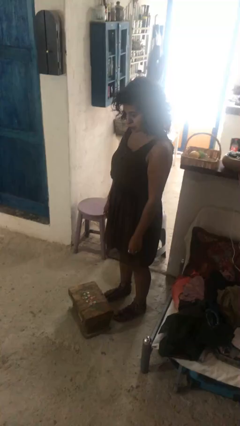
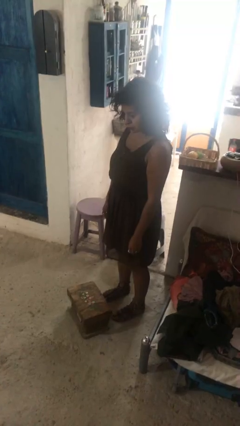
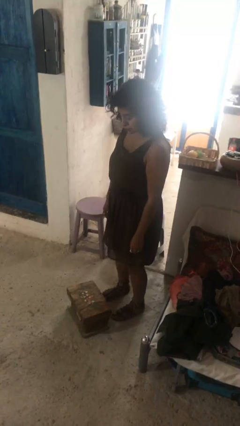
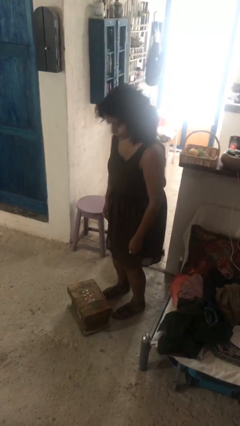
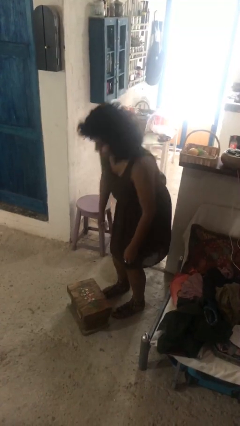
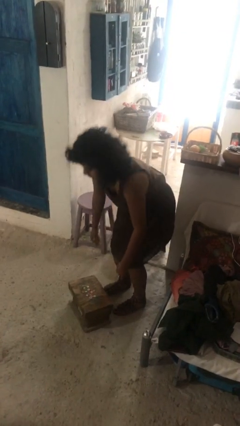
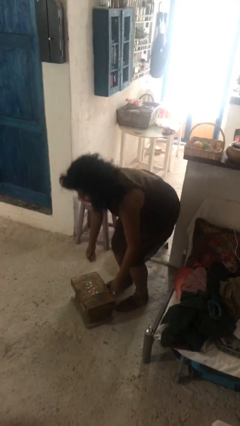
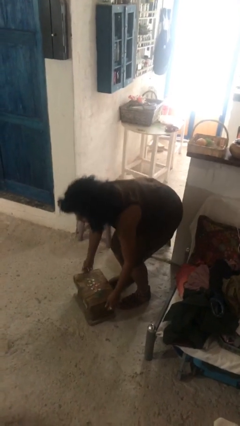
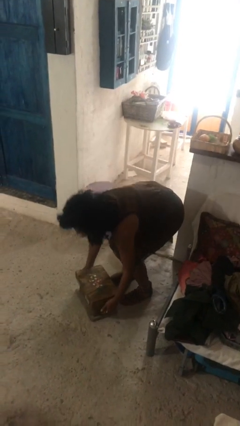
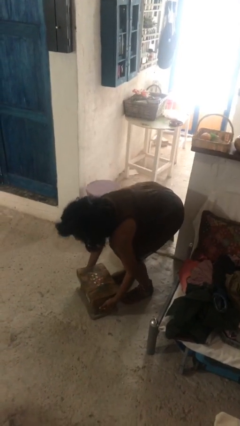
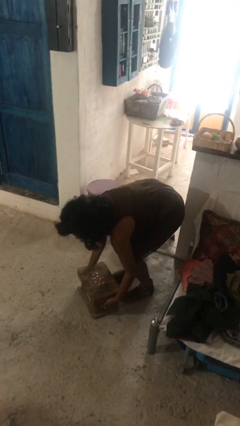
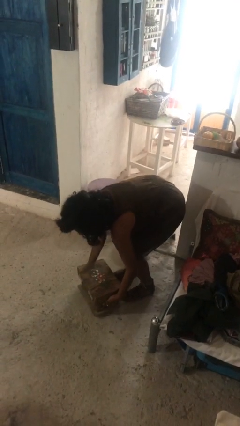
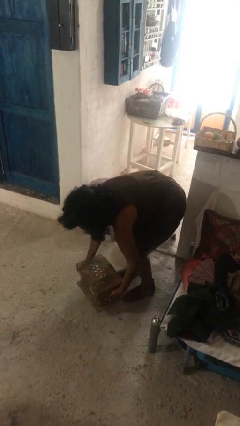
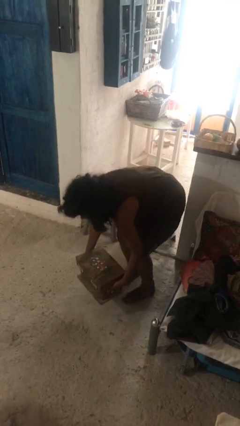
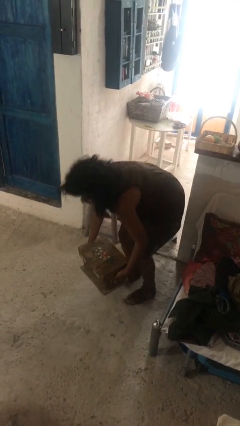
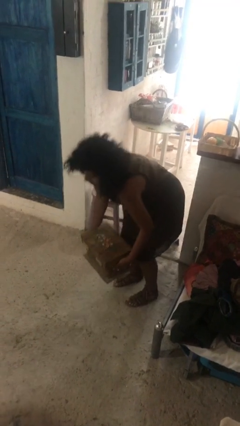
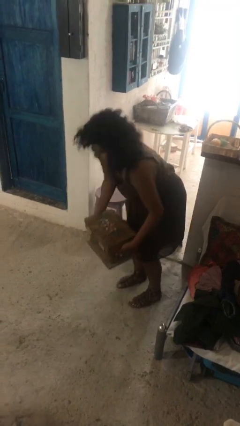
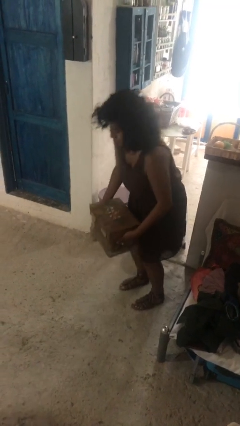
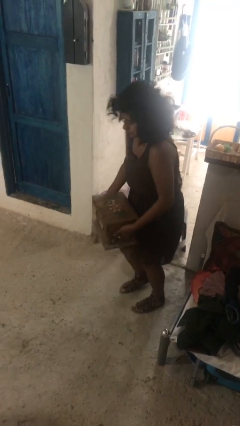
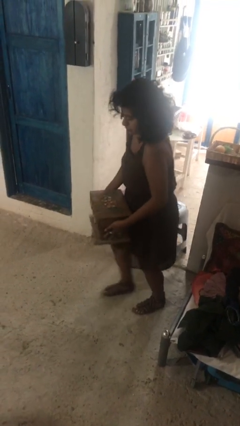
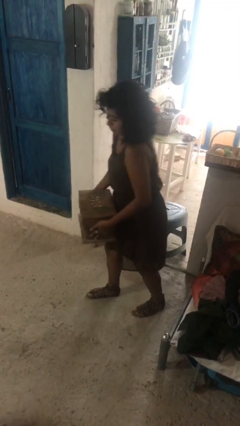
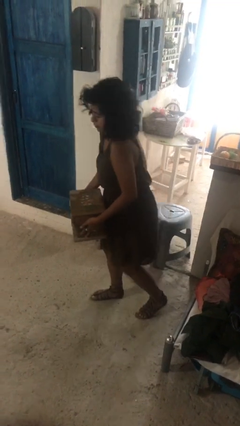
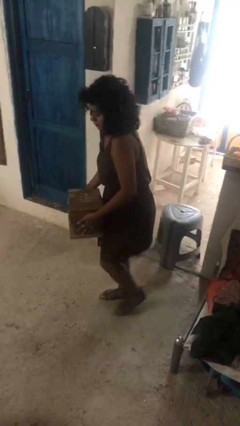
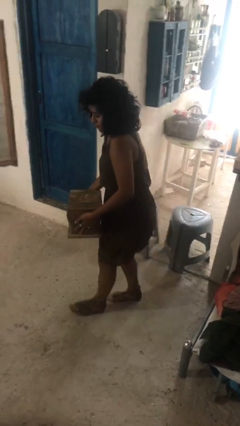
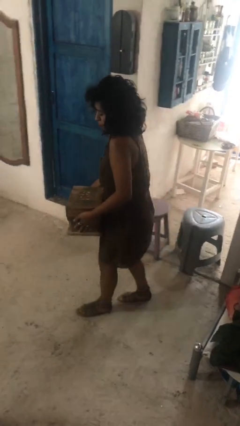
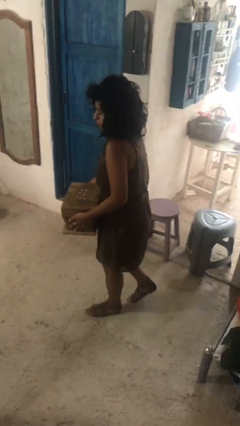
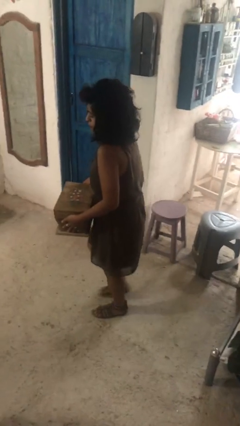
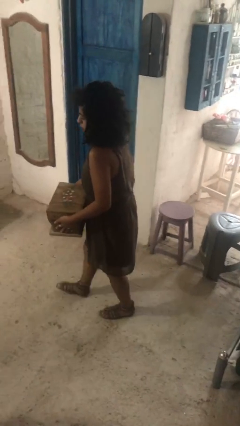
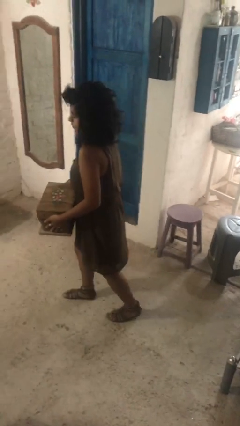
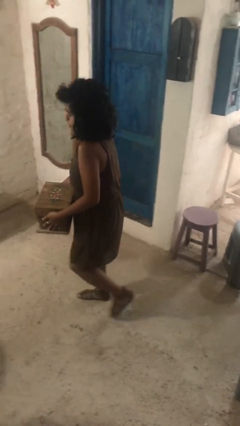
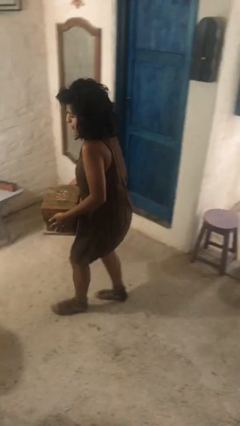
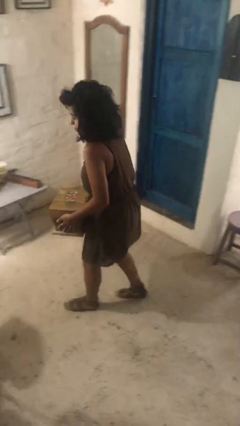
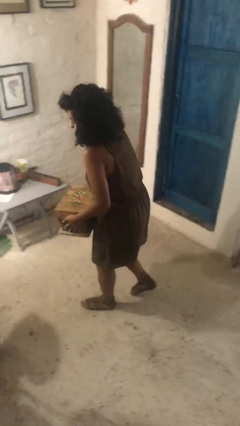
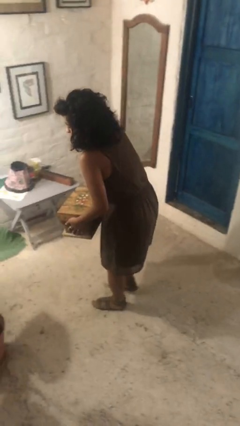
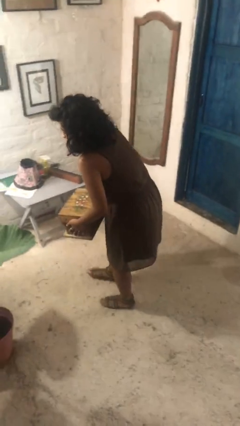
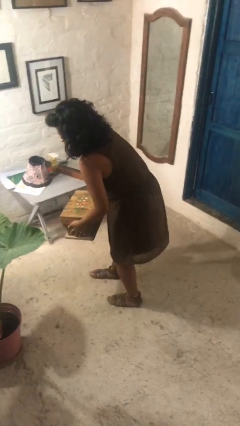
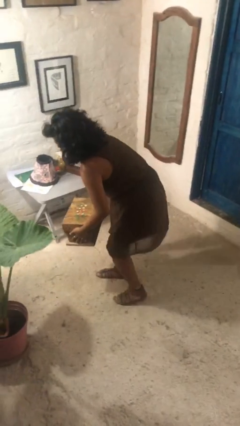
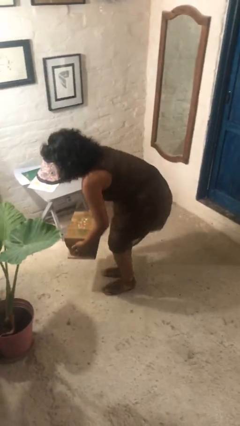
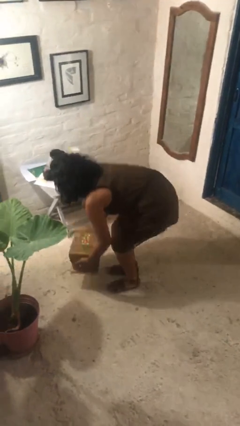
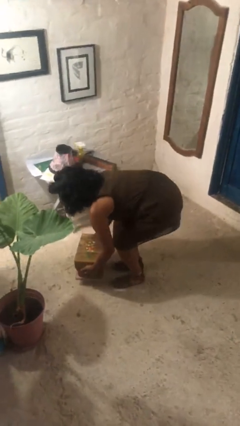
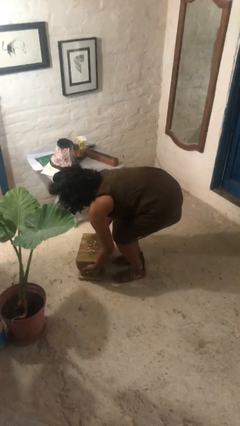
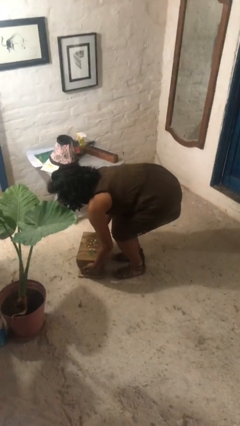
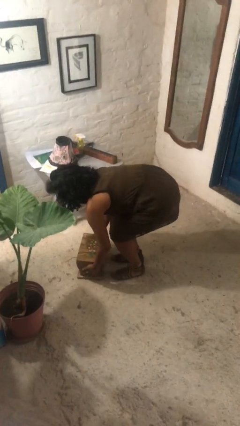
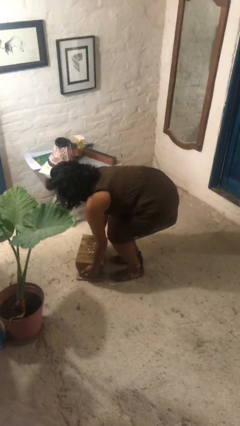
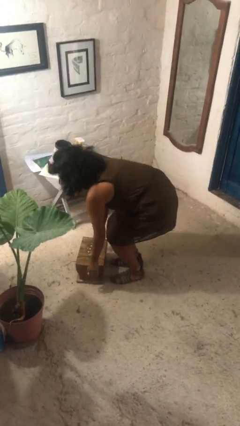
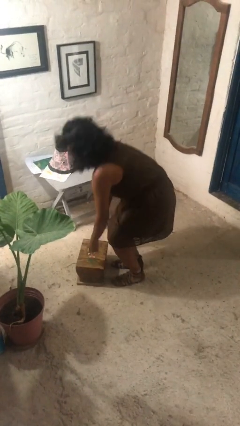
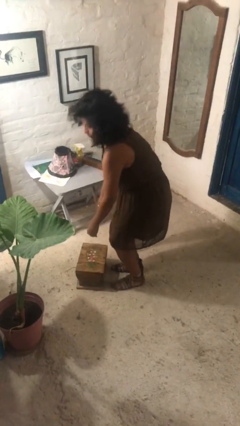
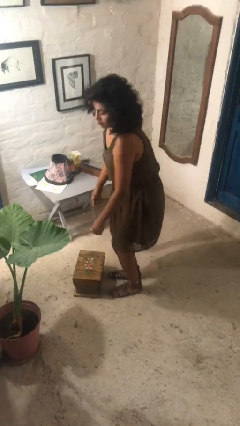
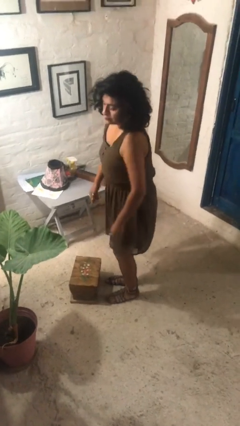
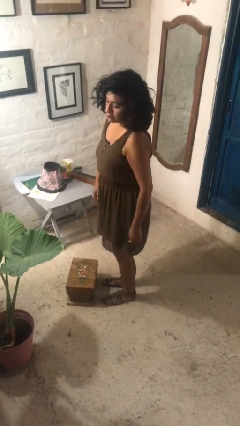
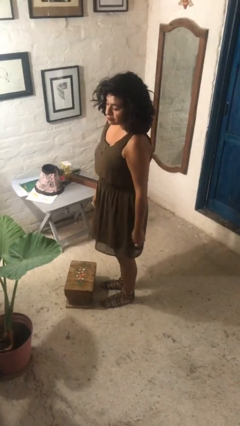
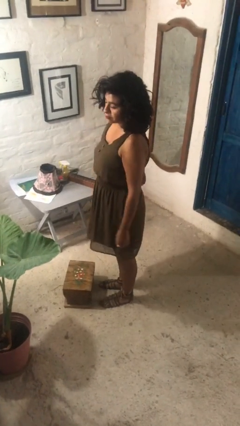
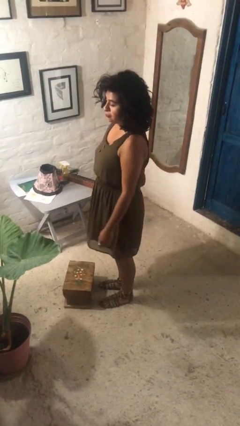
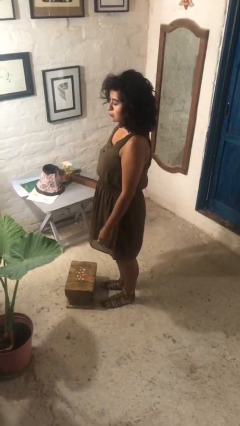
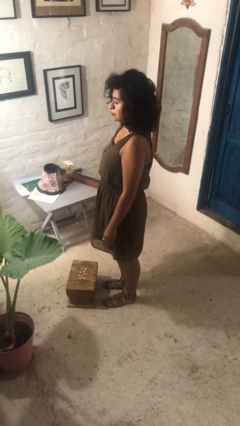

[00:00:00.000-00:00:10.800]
person picks up object from floor

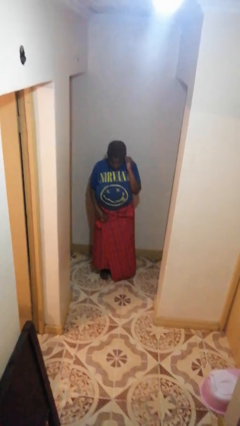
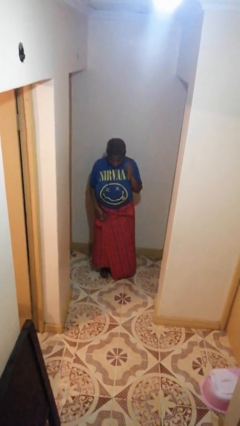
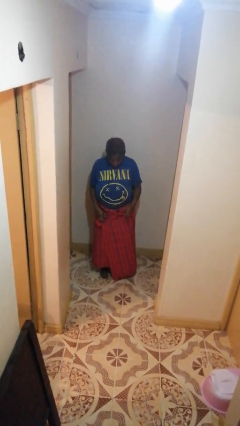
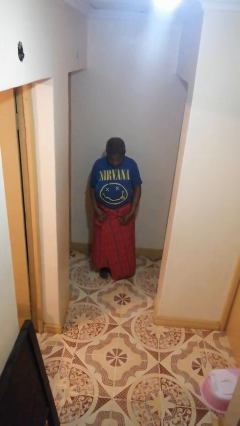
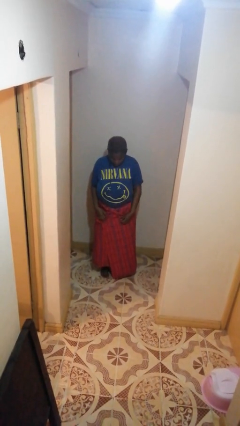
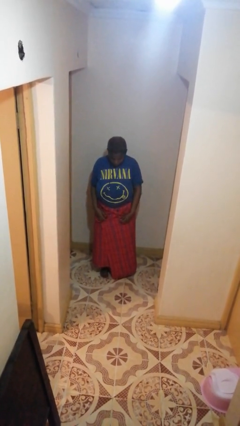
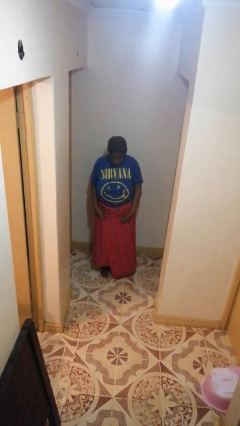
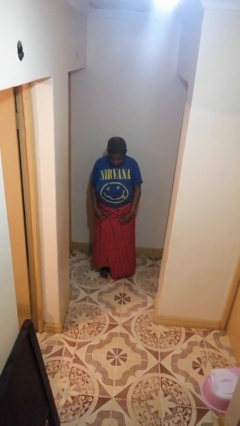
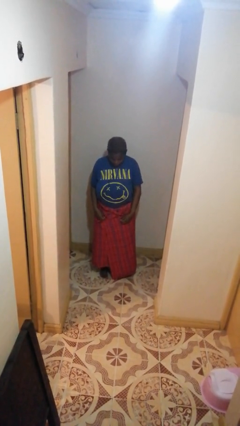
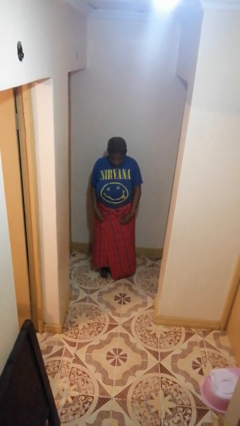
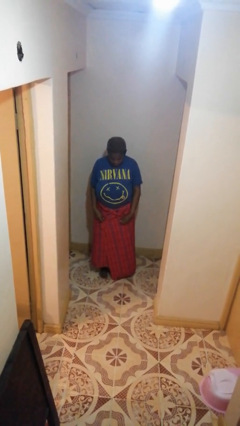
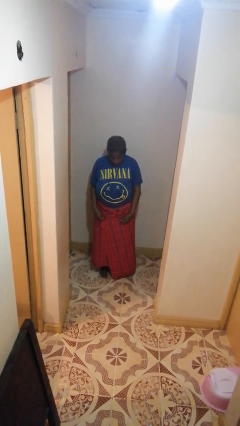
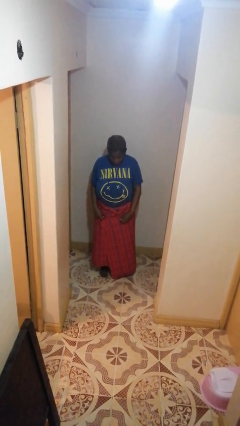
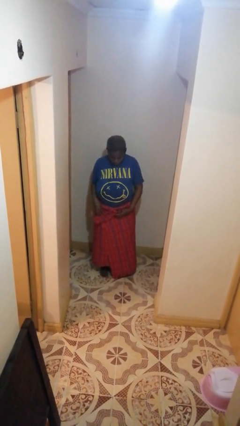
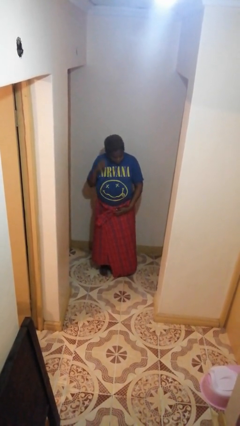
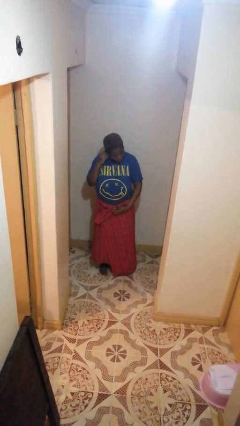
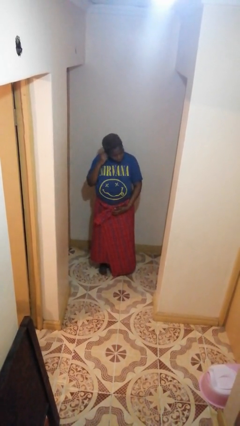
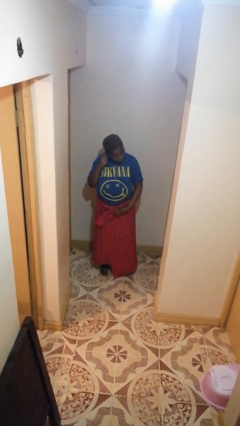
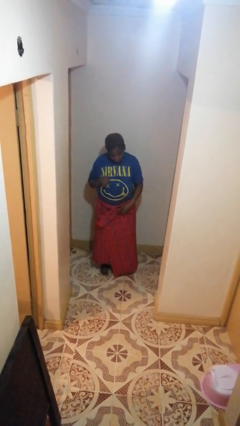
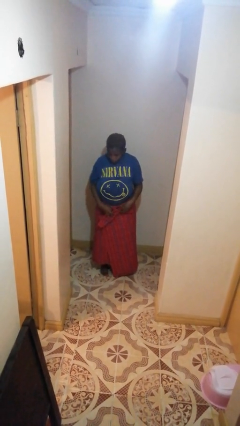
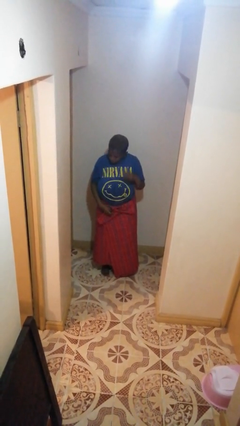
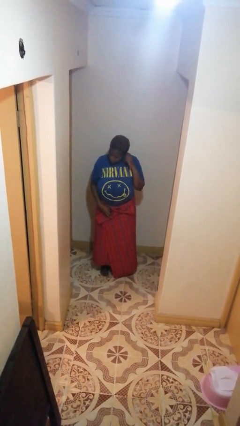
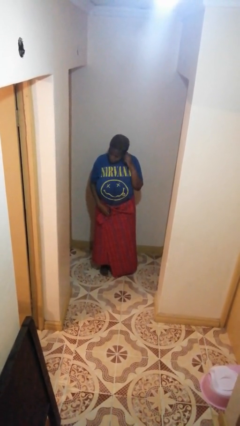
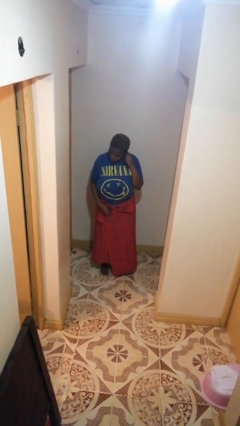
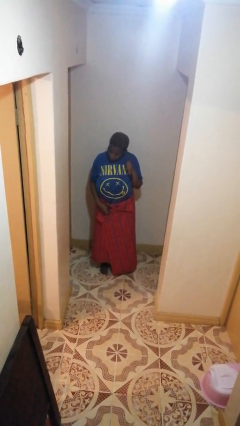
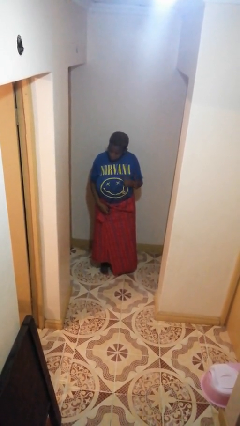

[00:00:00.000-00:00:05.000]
person takes off headphones

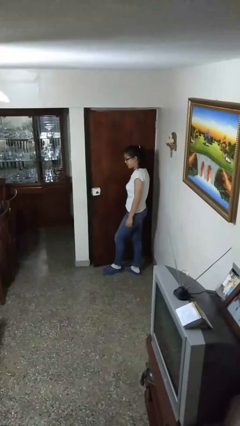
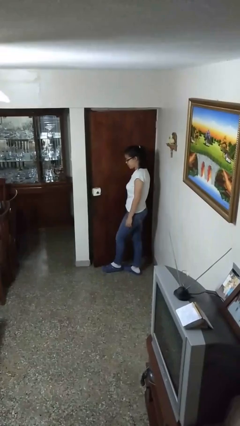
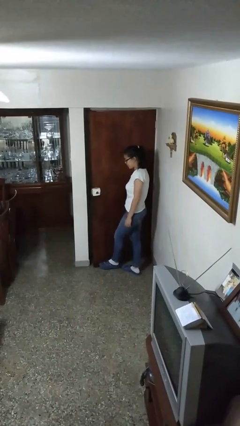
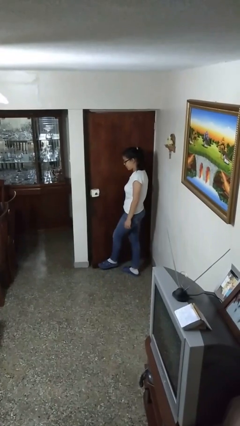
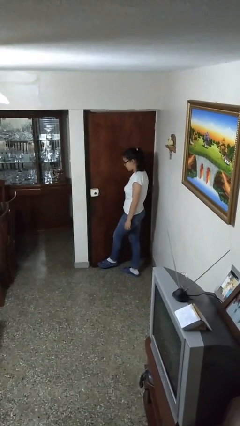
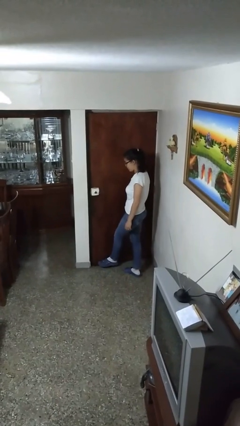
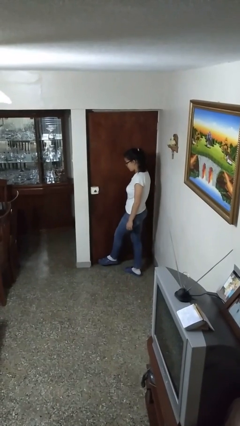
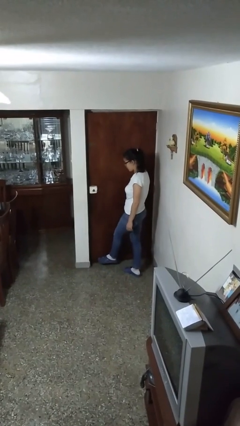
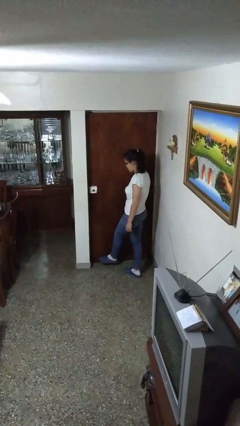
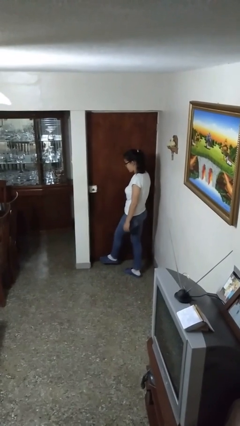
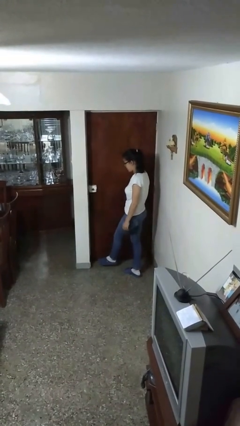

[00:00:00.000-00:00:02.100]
person closes door with foot

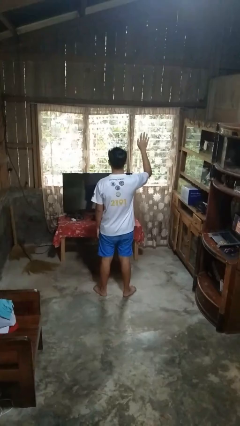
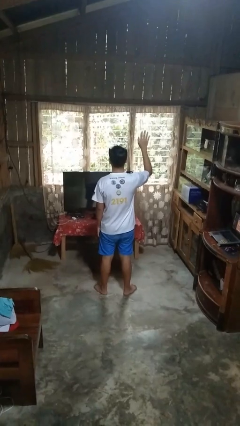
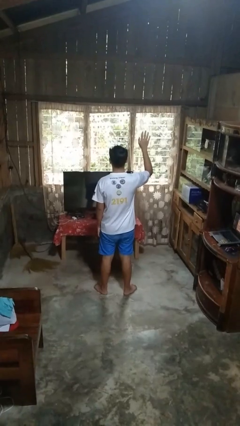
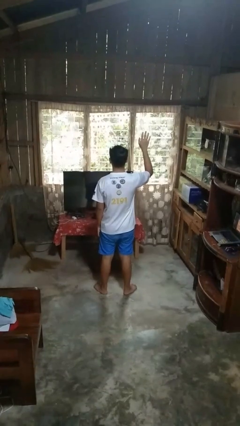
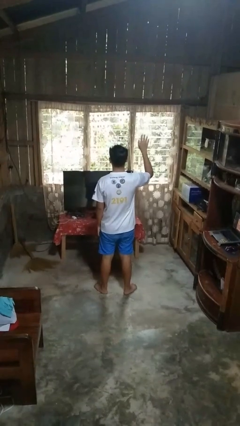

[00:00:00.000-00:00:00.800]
person gestures lower hand
